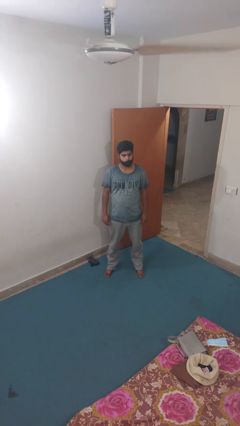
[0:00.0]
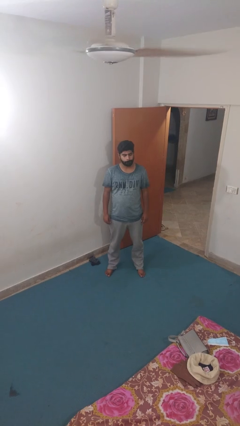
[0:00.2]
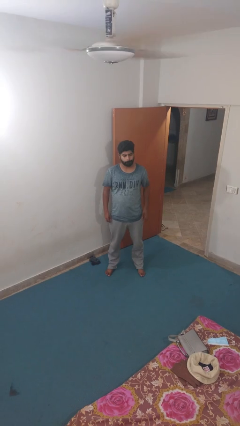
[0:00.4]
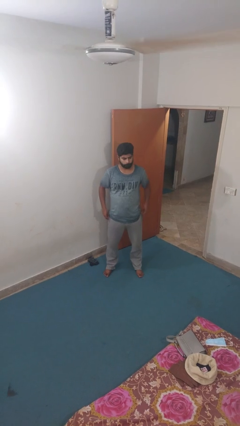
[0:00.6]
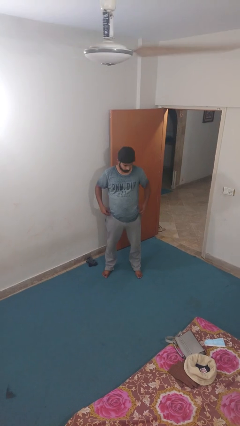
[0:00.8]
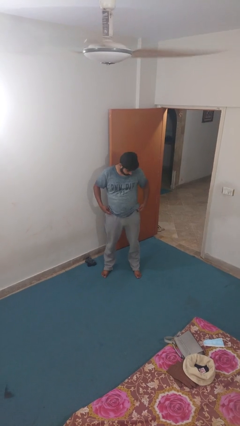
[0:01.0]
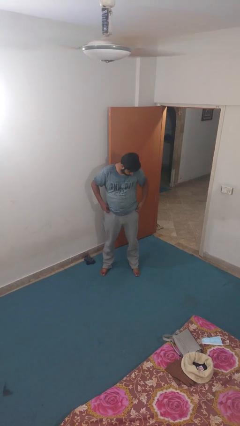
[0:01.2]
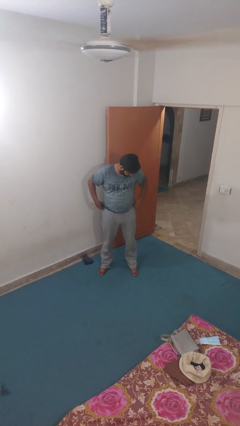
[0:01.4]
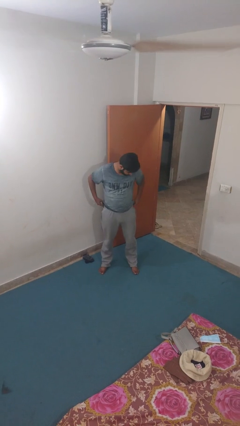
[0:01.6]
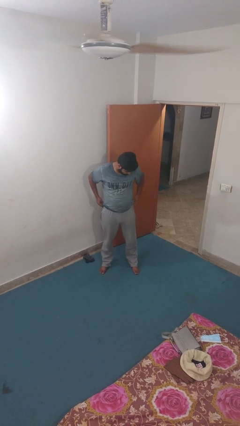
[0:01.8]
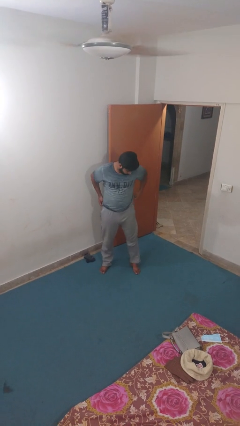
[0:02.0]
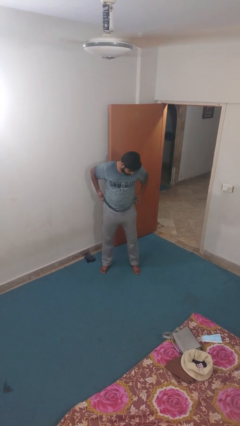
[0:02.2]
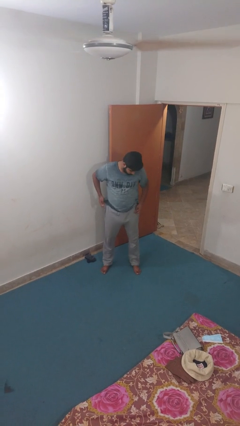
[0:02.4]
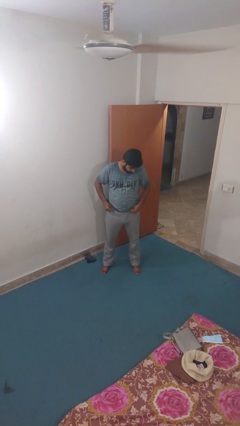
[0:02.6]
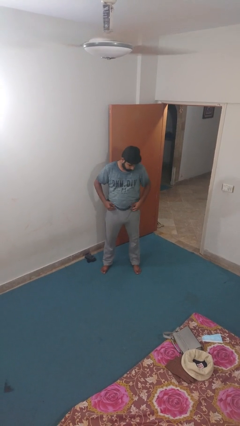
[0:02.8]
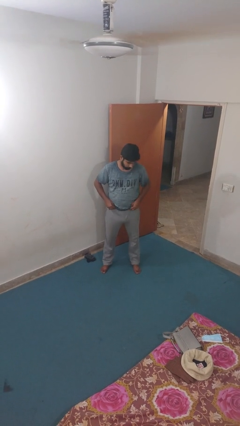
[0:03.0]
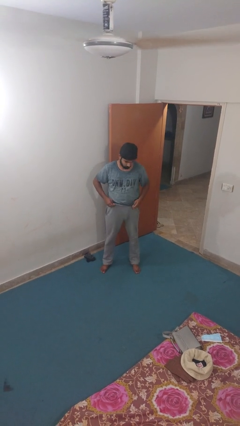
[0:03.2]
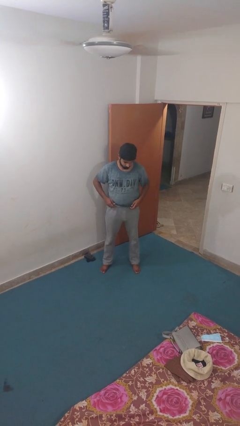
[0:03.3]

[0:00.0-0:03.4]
person hikes up pants

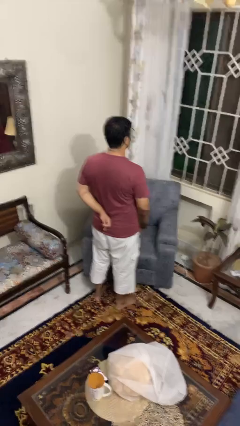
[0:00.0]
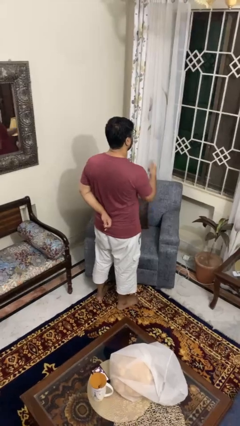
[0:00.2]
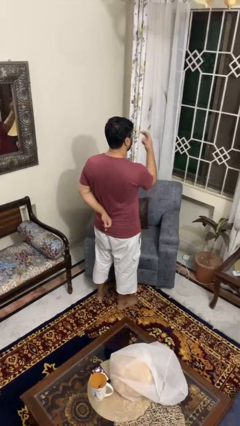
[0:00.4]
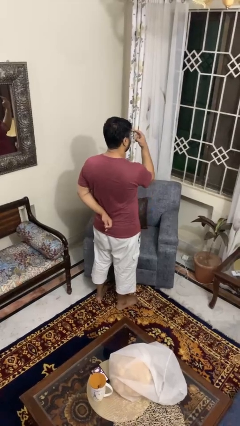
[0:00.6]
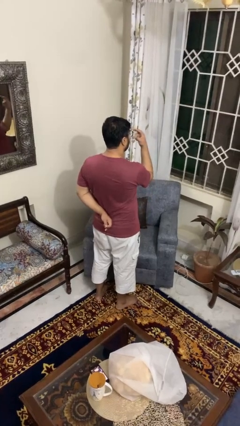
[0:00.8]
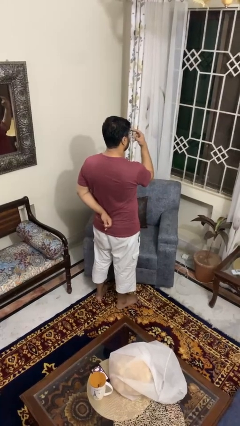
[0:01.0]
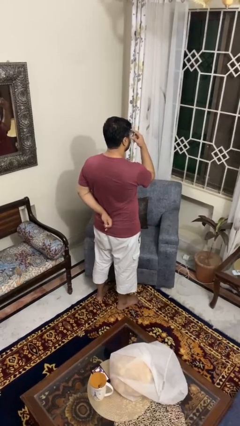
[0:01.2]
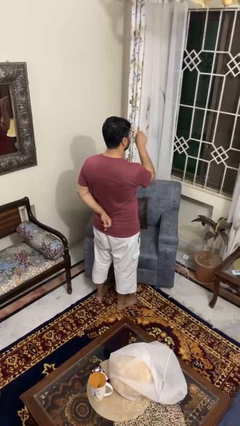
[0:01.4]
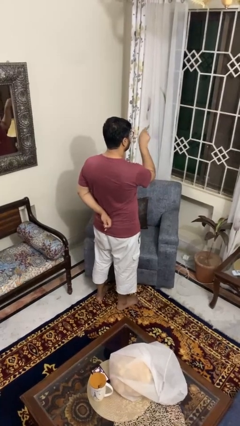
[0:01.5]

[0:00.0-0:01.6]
person gestures watch closely

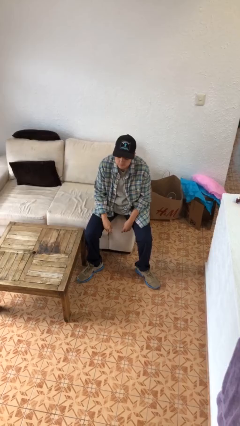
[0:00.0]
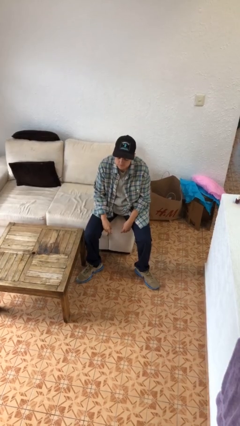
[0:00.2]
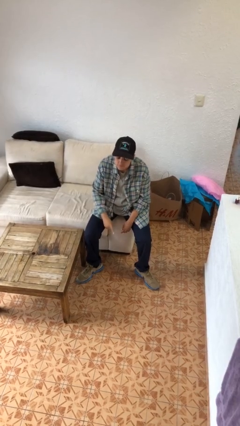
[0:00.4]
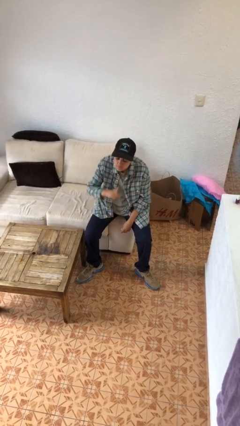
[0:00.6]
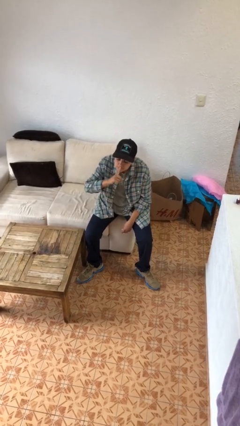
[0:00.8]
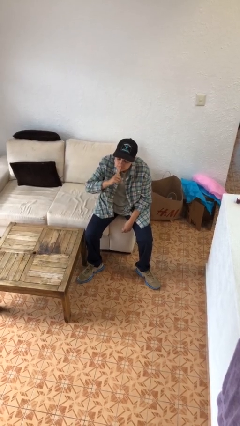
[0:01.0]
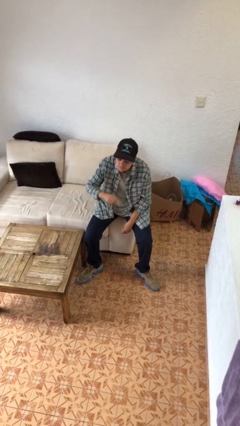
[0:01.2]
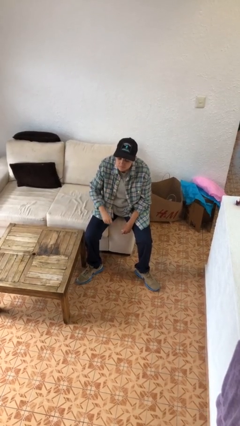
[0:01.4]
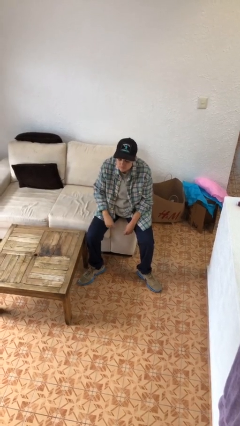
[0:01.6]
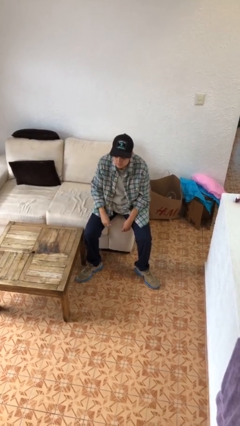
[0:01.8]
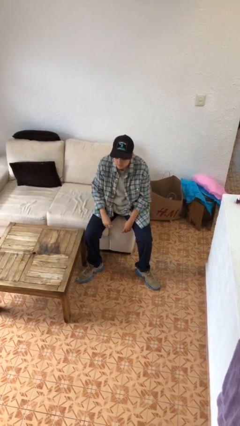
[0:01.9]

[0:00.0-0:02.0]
person gestures be quiet

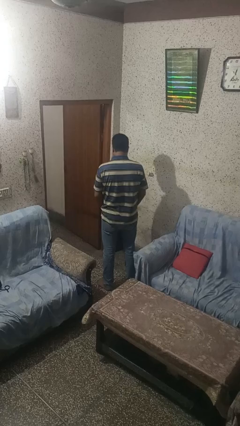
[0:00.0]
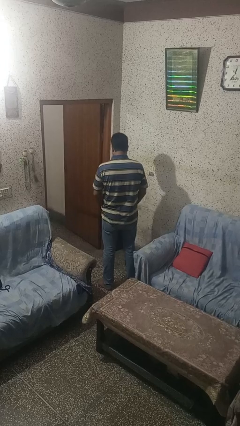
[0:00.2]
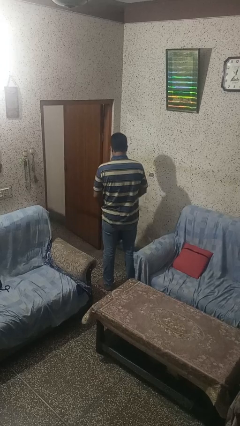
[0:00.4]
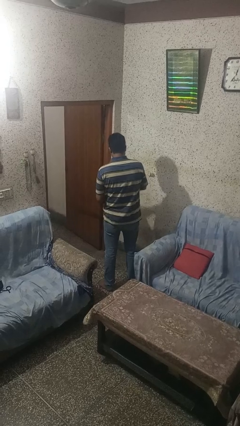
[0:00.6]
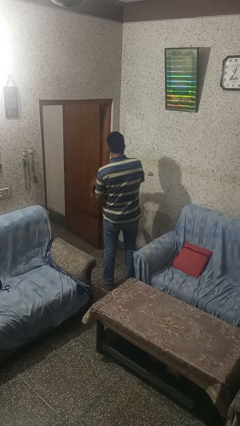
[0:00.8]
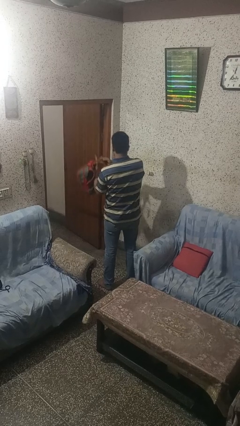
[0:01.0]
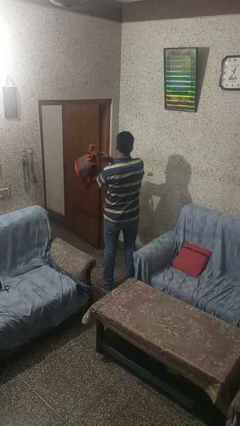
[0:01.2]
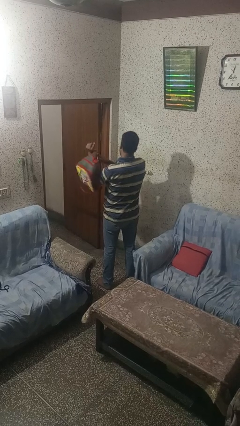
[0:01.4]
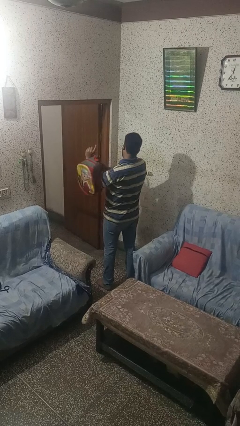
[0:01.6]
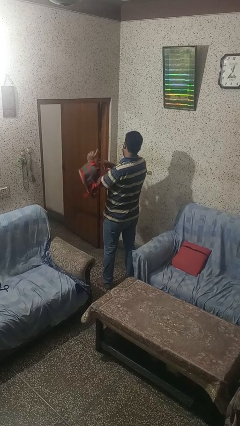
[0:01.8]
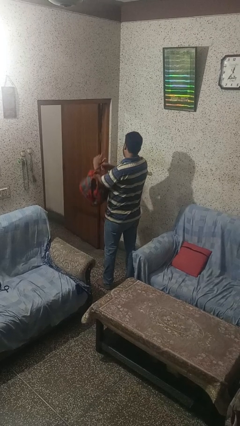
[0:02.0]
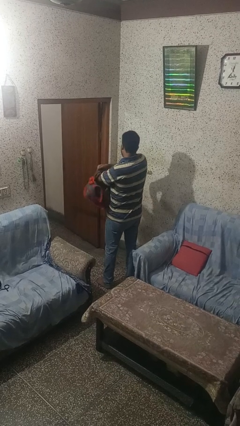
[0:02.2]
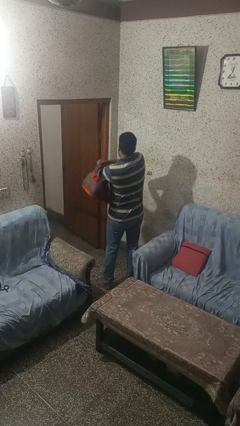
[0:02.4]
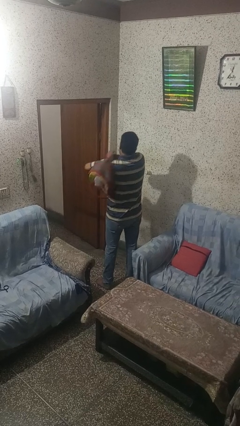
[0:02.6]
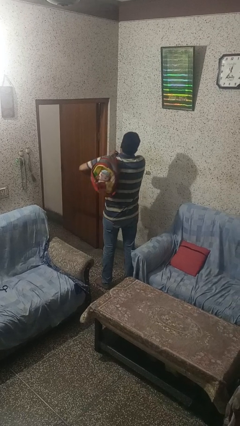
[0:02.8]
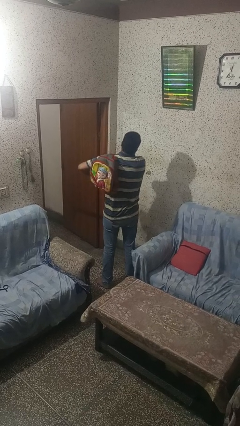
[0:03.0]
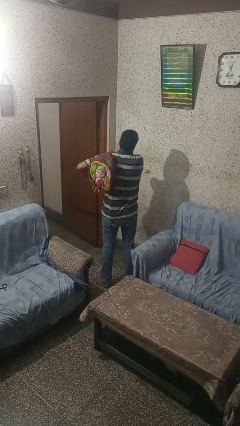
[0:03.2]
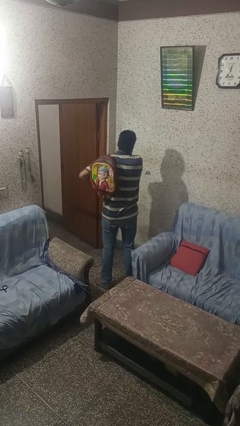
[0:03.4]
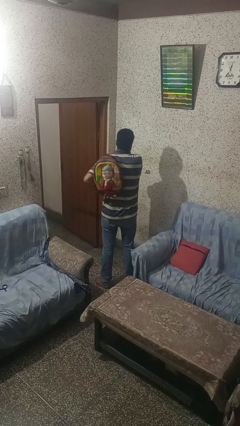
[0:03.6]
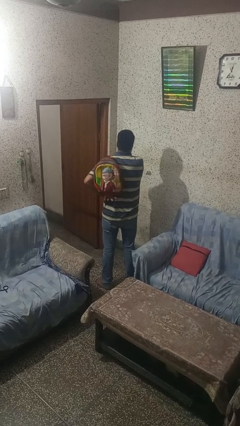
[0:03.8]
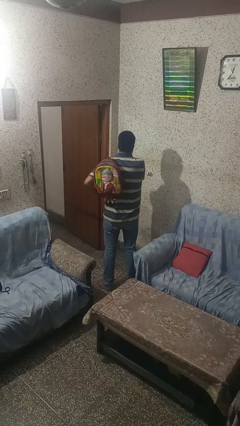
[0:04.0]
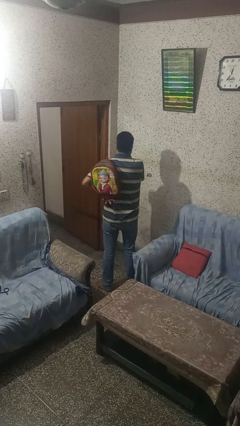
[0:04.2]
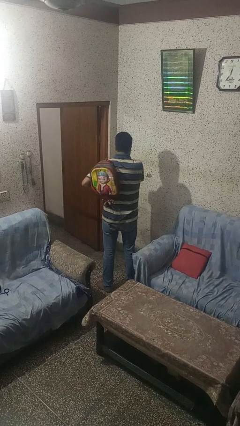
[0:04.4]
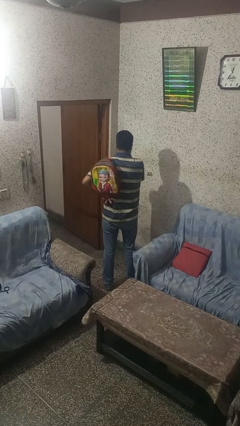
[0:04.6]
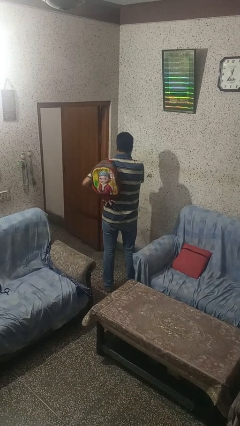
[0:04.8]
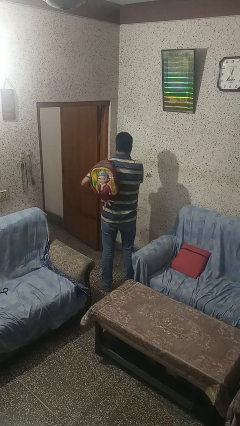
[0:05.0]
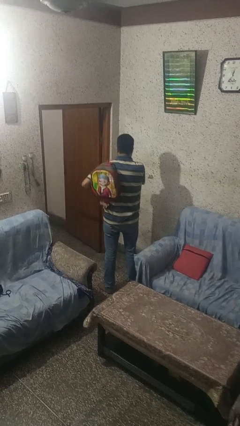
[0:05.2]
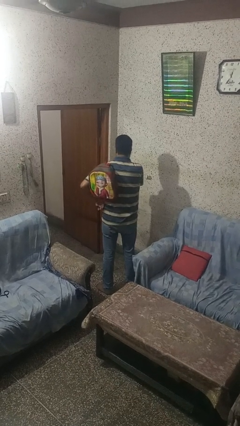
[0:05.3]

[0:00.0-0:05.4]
person puts on backpack

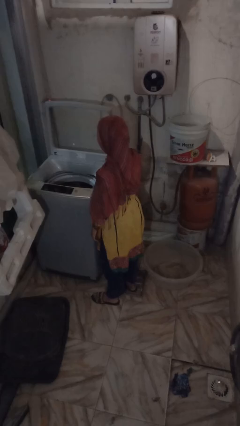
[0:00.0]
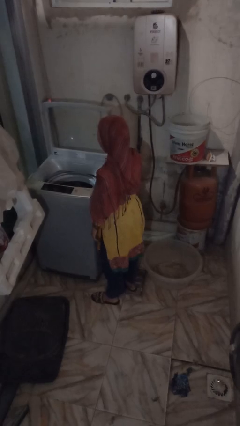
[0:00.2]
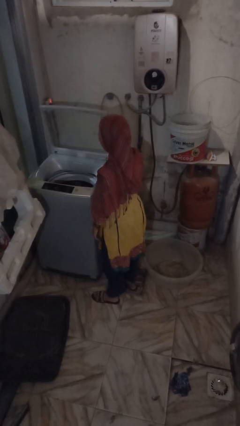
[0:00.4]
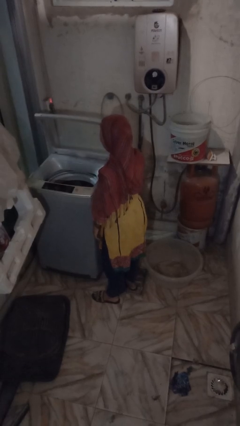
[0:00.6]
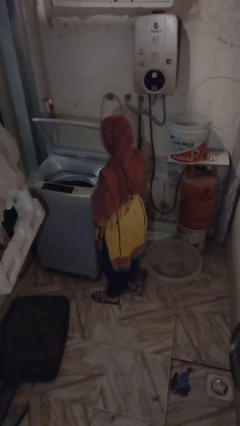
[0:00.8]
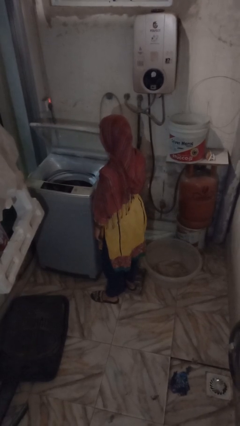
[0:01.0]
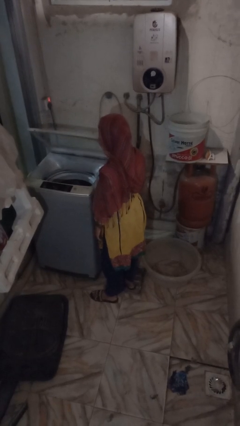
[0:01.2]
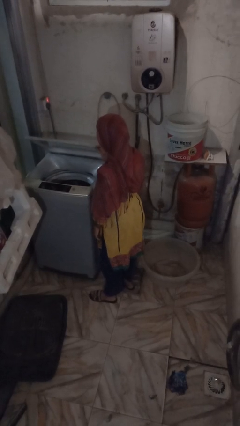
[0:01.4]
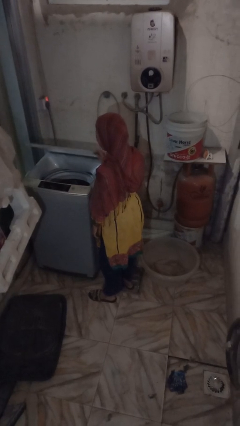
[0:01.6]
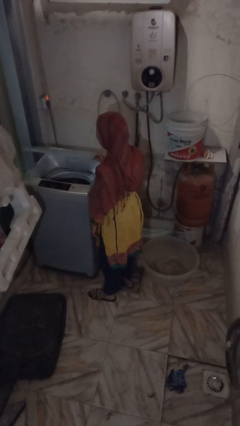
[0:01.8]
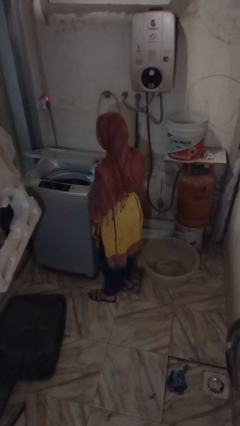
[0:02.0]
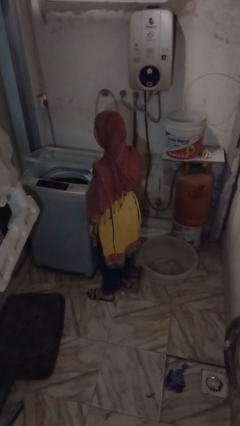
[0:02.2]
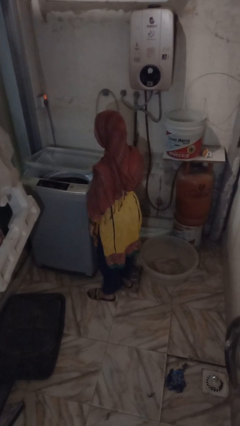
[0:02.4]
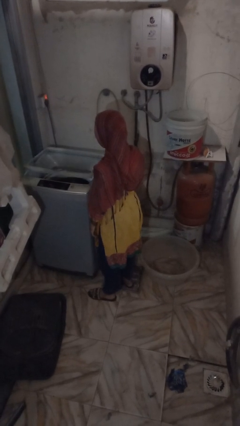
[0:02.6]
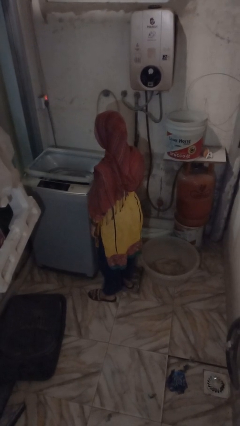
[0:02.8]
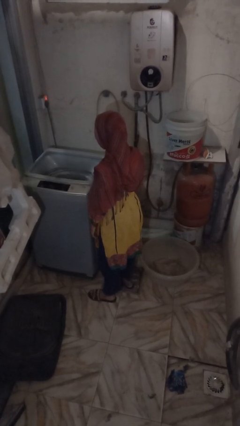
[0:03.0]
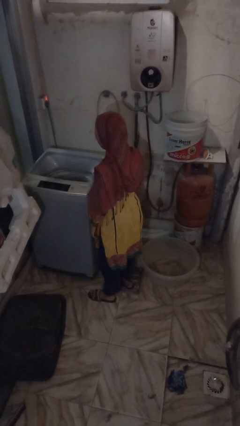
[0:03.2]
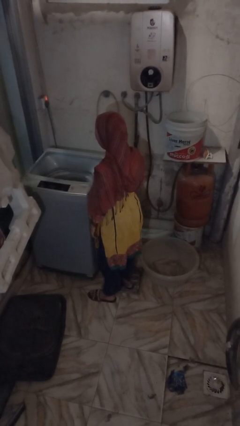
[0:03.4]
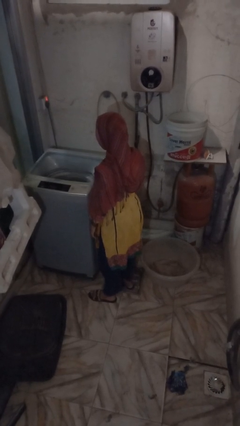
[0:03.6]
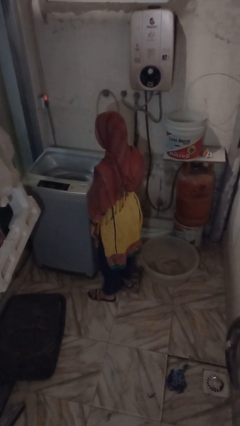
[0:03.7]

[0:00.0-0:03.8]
person closes clothes washer

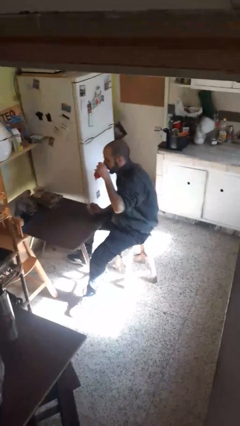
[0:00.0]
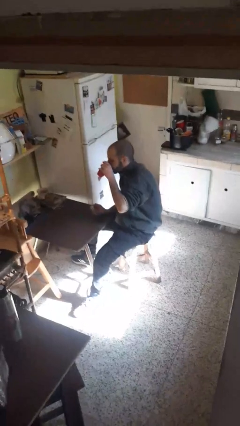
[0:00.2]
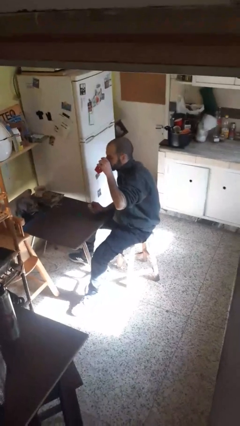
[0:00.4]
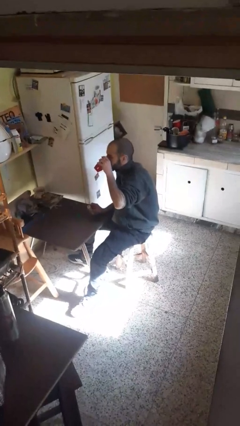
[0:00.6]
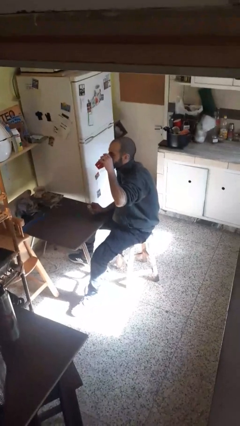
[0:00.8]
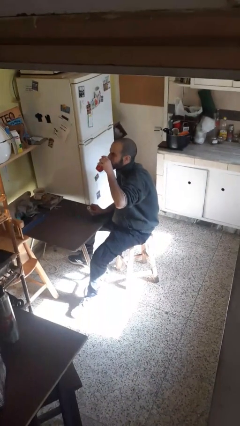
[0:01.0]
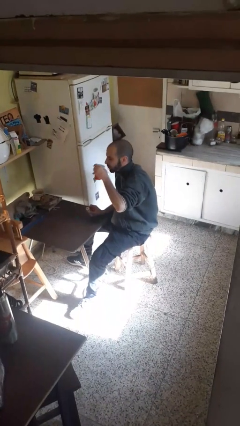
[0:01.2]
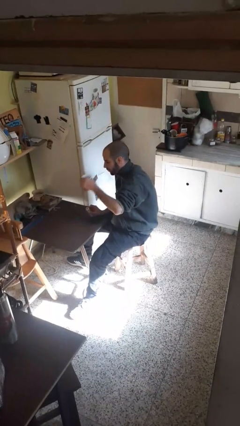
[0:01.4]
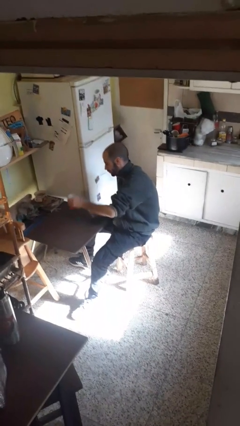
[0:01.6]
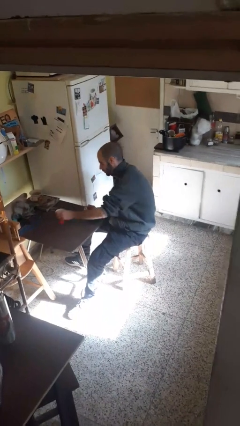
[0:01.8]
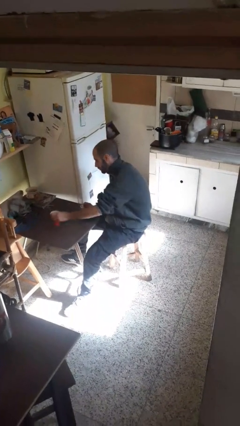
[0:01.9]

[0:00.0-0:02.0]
person drinks from cup
